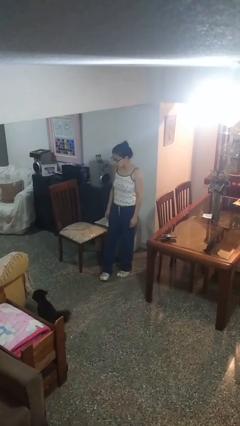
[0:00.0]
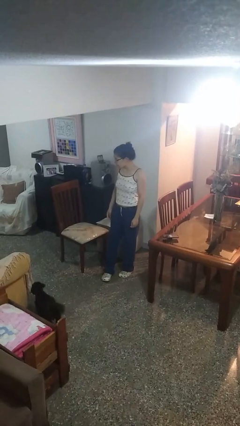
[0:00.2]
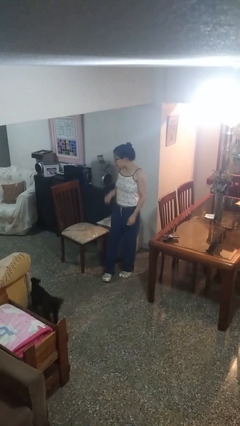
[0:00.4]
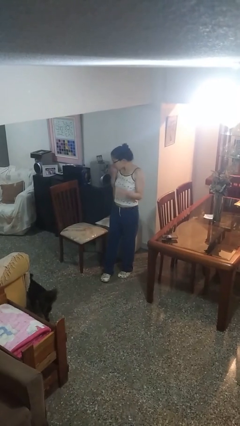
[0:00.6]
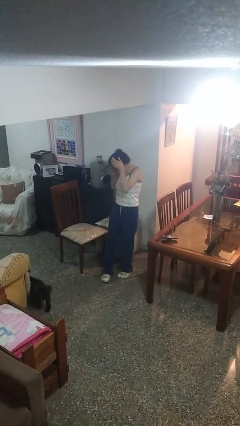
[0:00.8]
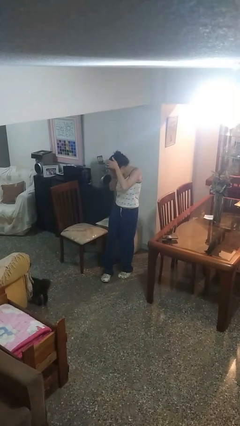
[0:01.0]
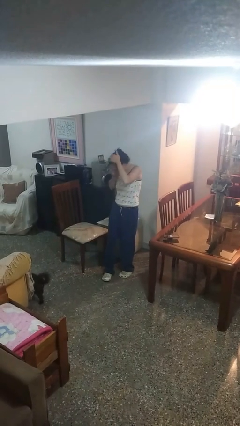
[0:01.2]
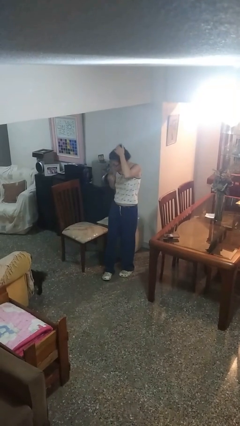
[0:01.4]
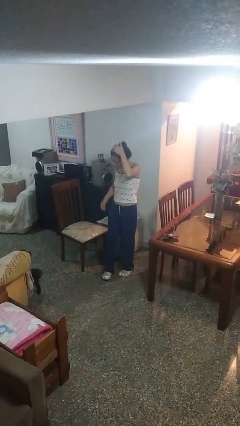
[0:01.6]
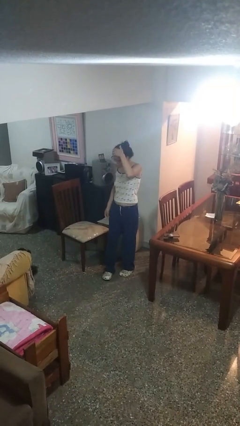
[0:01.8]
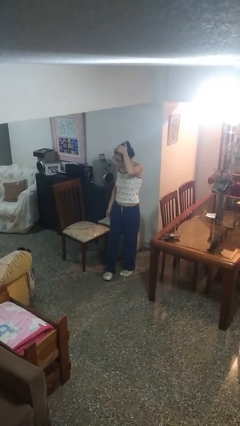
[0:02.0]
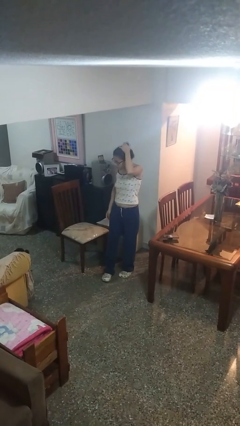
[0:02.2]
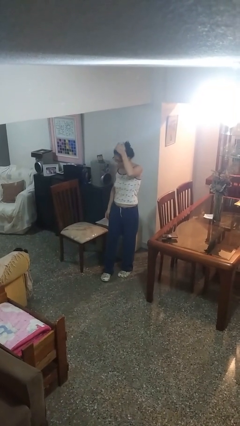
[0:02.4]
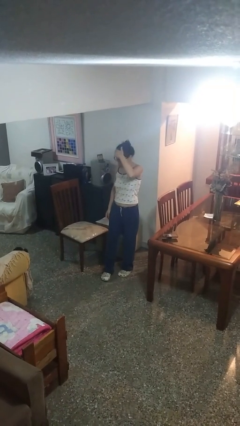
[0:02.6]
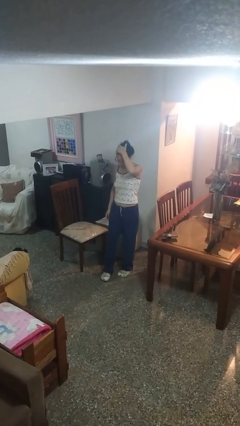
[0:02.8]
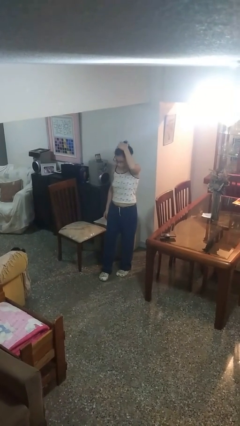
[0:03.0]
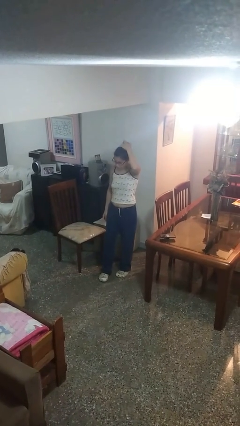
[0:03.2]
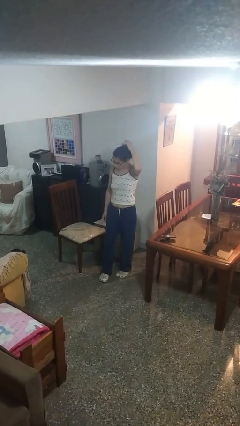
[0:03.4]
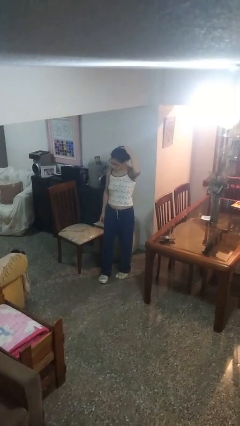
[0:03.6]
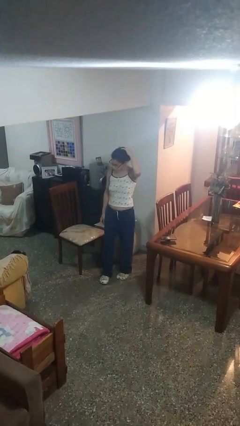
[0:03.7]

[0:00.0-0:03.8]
person pats head

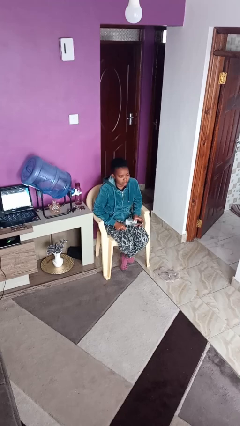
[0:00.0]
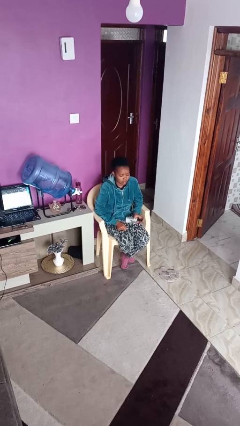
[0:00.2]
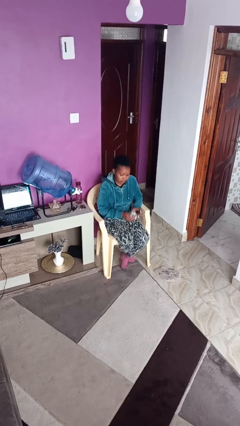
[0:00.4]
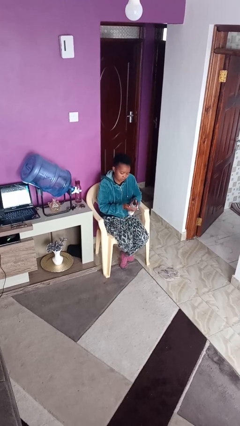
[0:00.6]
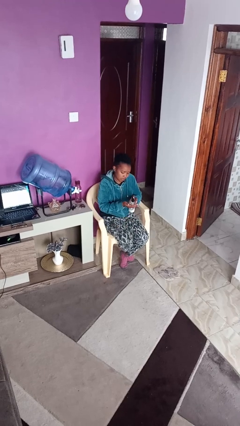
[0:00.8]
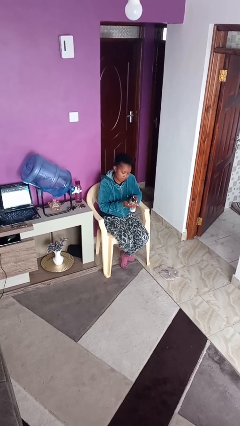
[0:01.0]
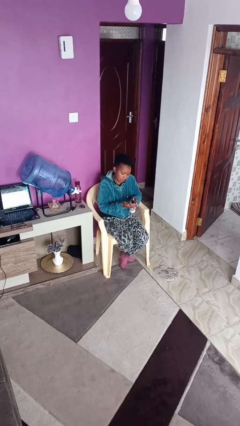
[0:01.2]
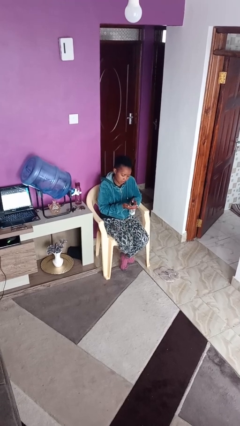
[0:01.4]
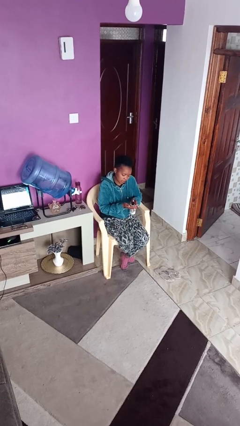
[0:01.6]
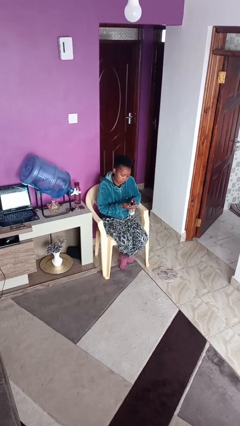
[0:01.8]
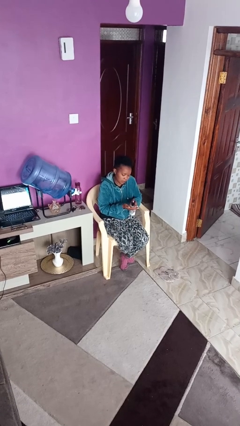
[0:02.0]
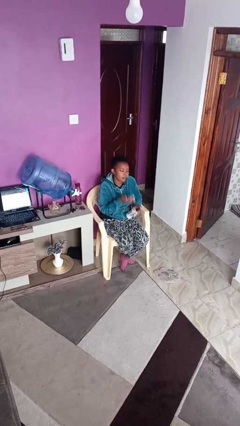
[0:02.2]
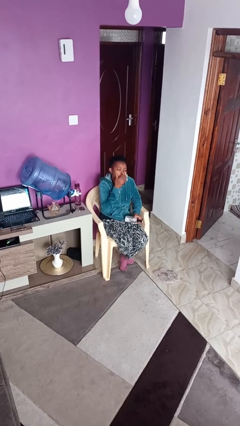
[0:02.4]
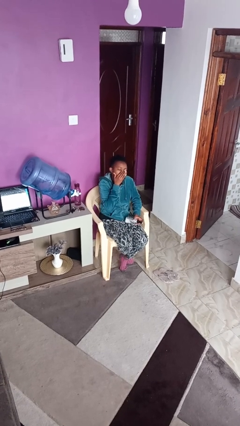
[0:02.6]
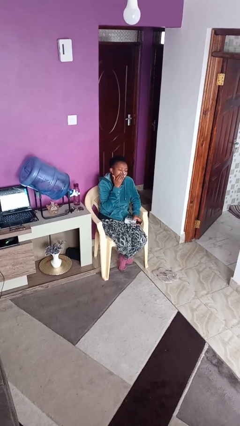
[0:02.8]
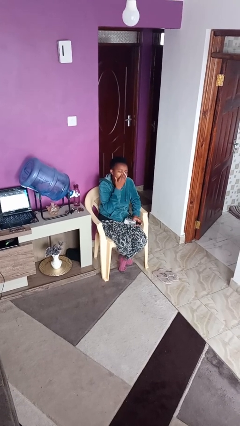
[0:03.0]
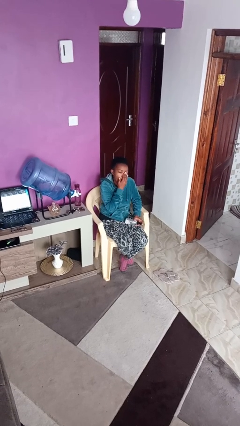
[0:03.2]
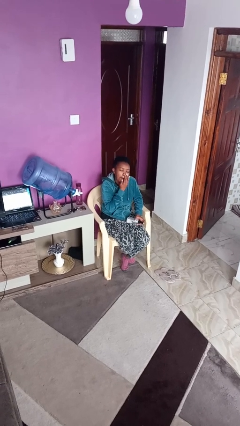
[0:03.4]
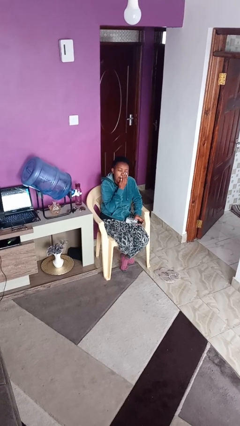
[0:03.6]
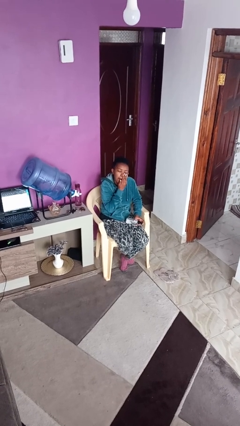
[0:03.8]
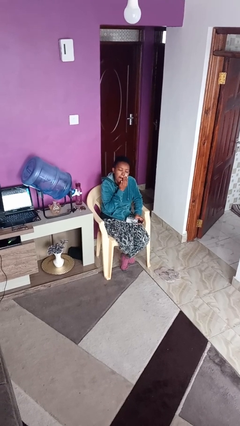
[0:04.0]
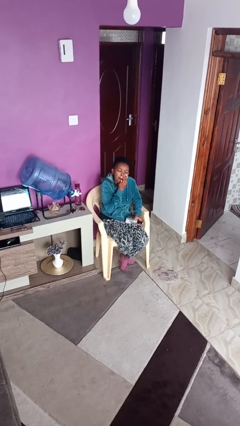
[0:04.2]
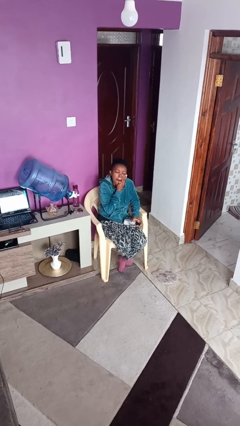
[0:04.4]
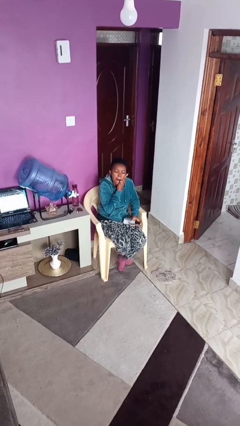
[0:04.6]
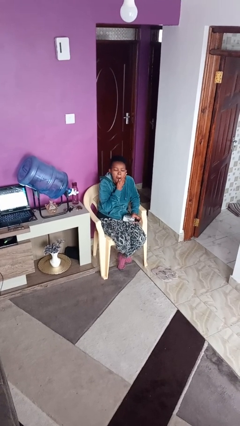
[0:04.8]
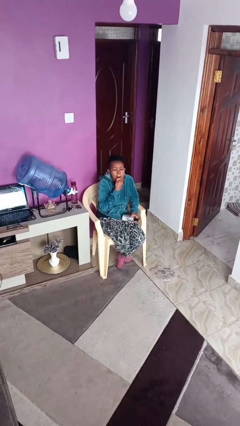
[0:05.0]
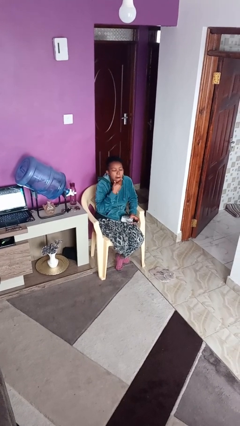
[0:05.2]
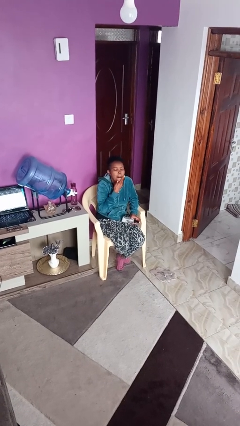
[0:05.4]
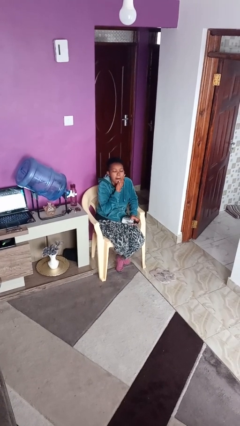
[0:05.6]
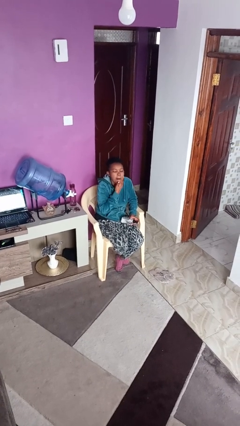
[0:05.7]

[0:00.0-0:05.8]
person applies facial moisturizer

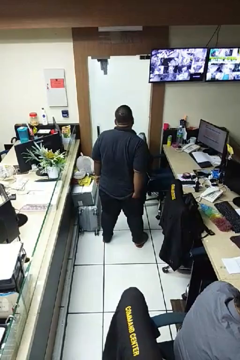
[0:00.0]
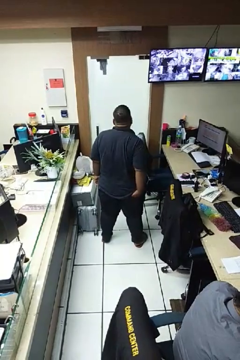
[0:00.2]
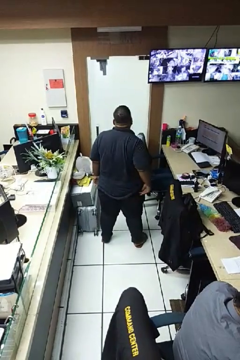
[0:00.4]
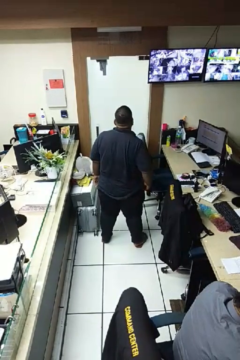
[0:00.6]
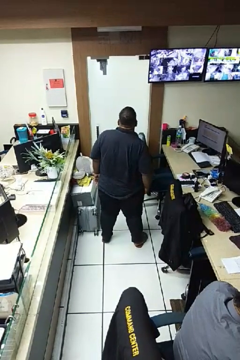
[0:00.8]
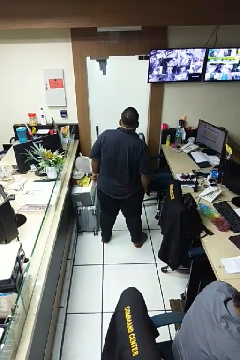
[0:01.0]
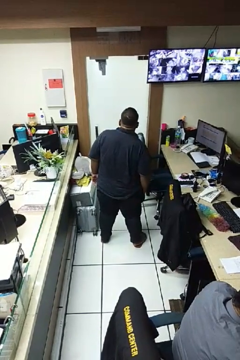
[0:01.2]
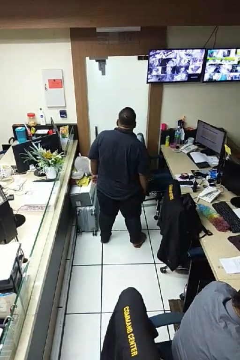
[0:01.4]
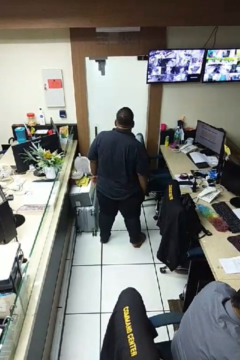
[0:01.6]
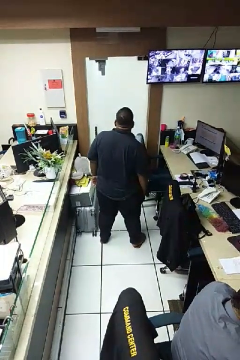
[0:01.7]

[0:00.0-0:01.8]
person puts hands in back pockets

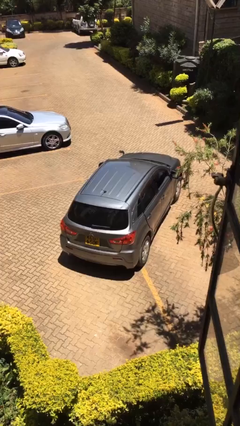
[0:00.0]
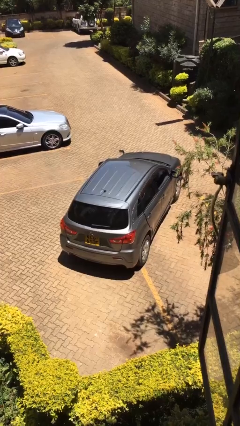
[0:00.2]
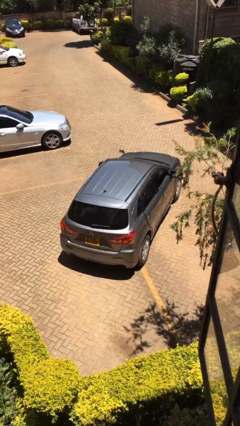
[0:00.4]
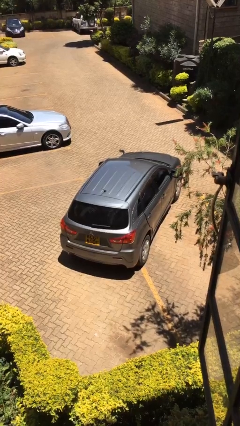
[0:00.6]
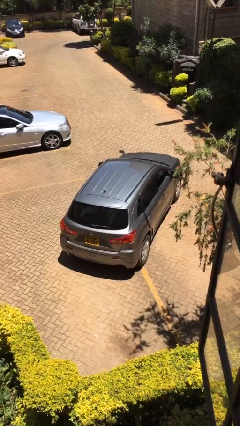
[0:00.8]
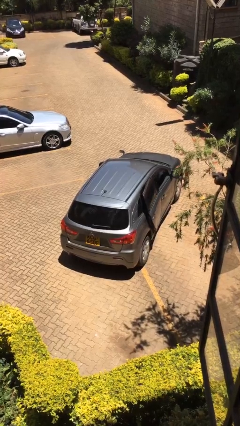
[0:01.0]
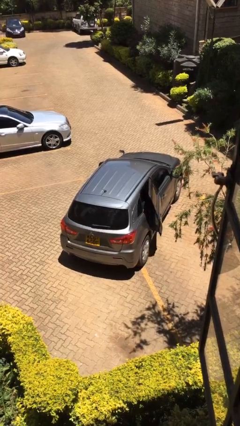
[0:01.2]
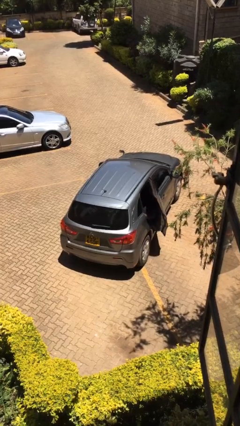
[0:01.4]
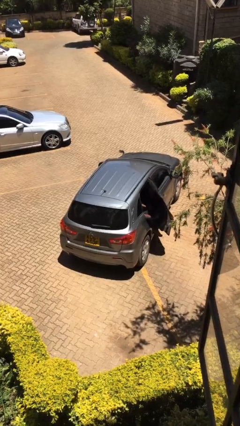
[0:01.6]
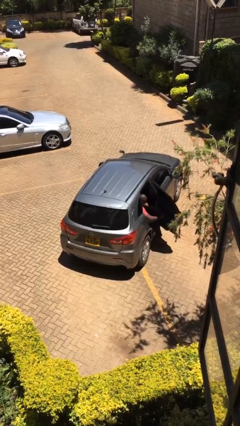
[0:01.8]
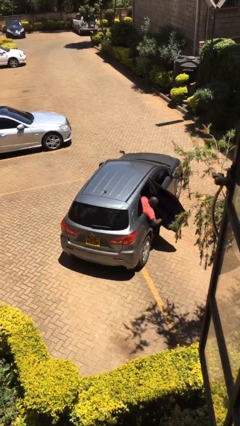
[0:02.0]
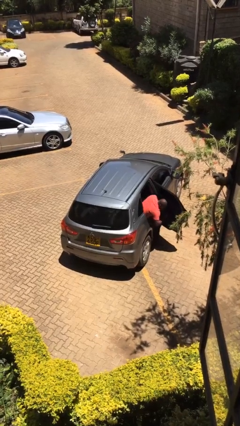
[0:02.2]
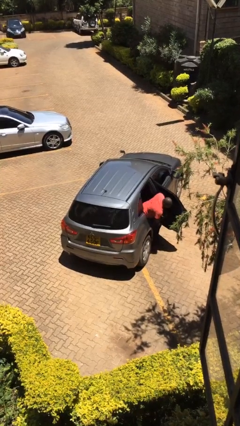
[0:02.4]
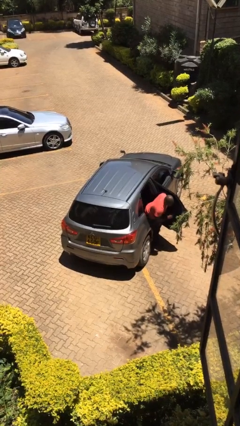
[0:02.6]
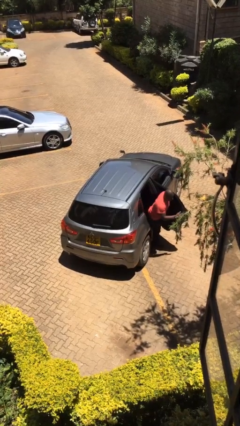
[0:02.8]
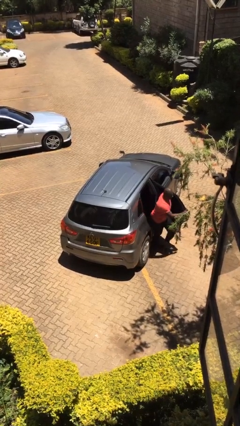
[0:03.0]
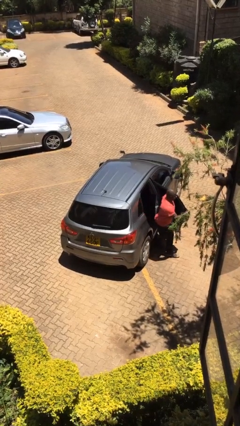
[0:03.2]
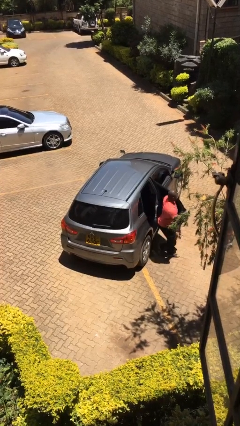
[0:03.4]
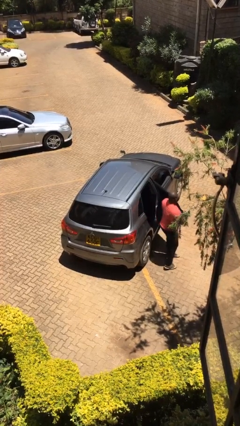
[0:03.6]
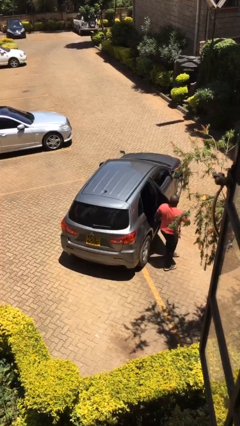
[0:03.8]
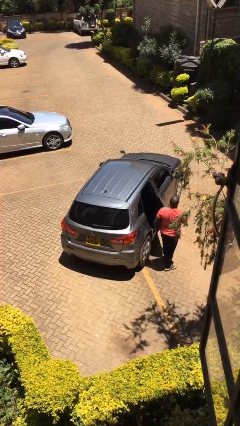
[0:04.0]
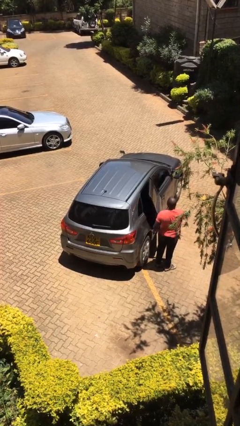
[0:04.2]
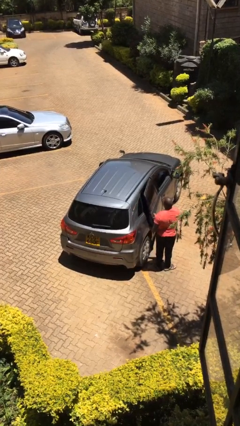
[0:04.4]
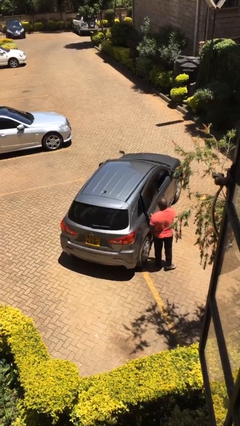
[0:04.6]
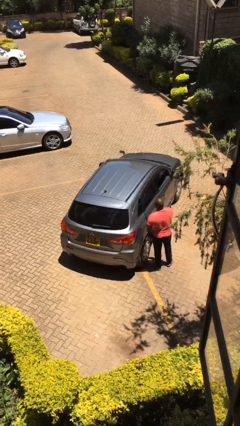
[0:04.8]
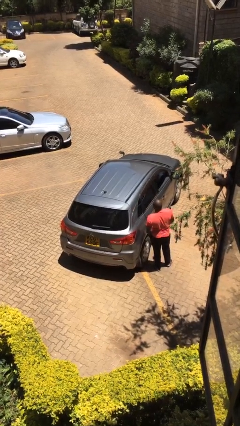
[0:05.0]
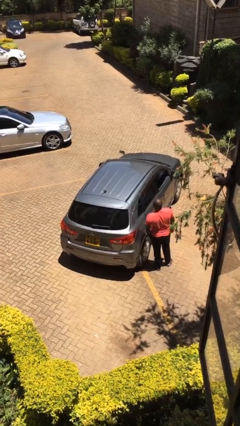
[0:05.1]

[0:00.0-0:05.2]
car drops off person

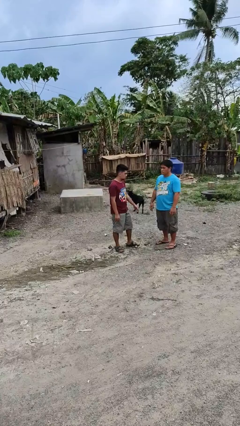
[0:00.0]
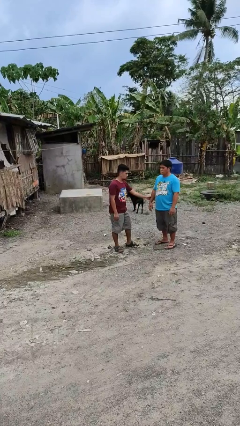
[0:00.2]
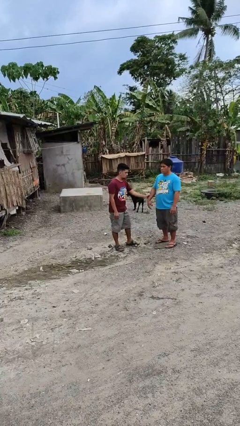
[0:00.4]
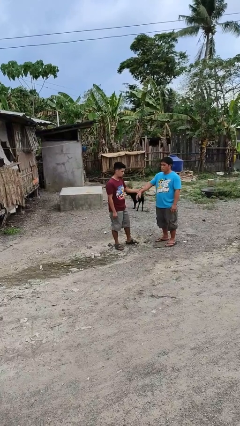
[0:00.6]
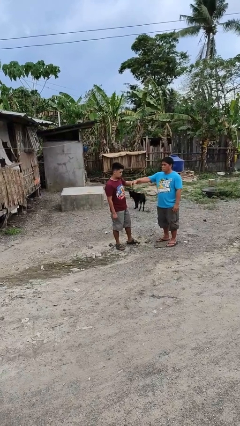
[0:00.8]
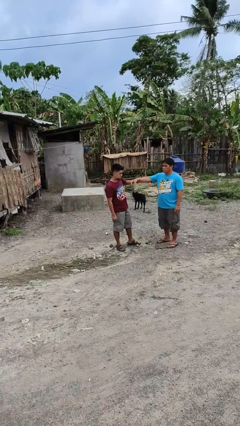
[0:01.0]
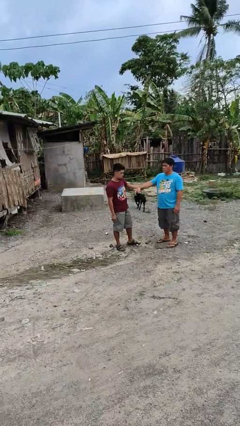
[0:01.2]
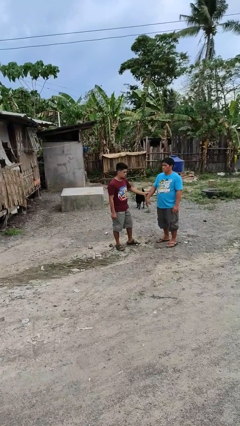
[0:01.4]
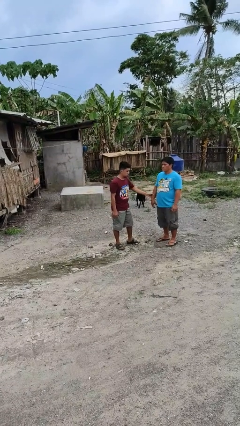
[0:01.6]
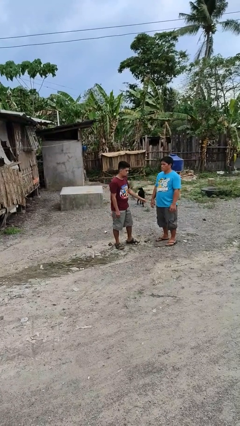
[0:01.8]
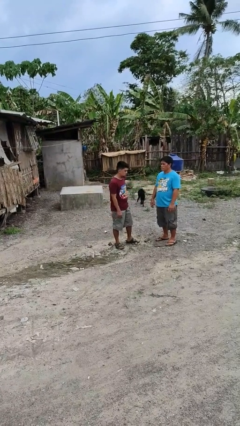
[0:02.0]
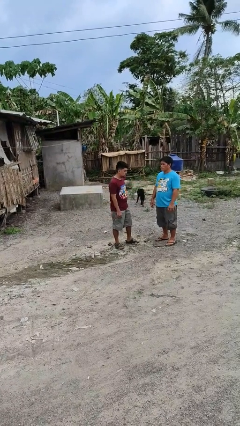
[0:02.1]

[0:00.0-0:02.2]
person grabs person by forearm
